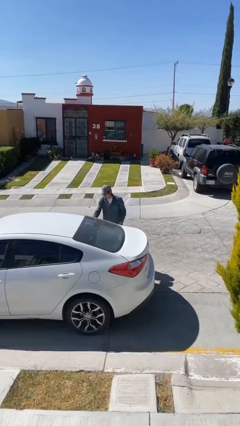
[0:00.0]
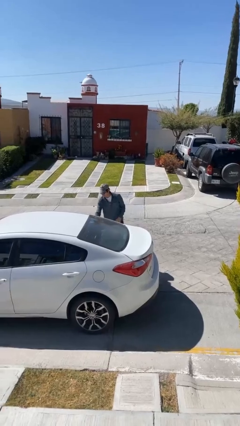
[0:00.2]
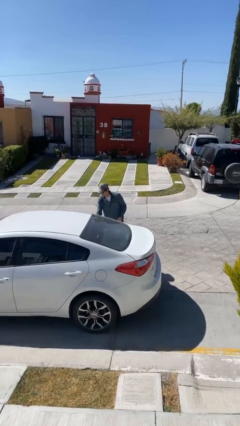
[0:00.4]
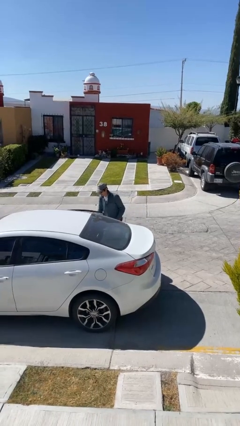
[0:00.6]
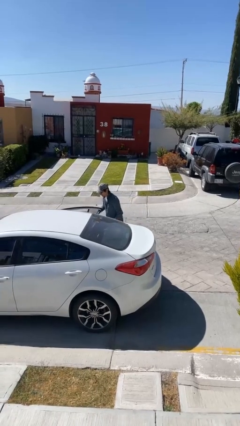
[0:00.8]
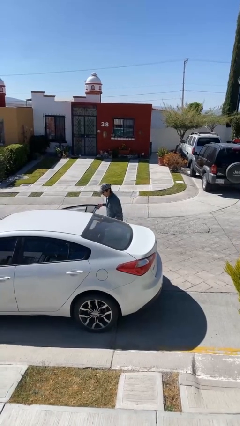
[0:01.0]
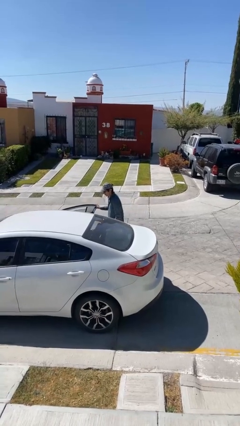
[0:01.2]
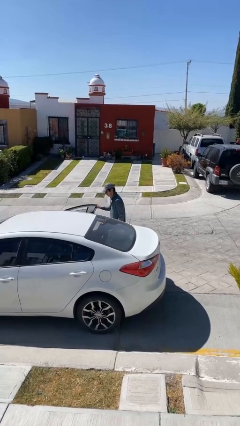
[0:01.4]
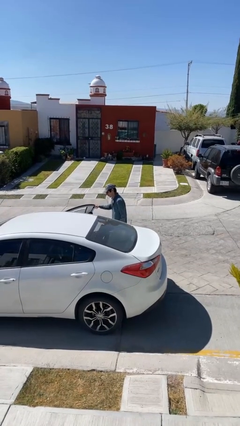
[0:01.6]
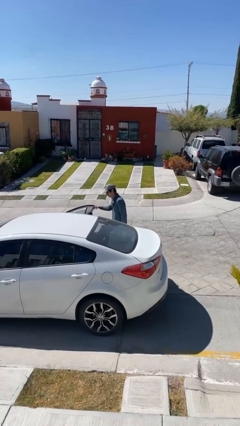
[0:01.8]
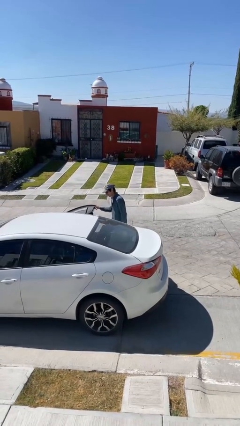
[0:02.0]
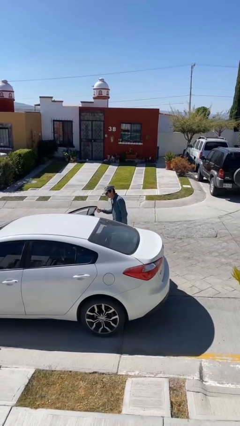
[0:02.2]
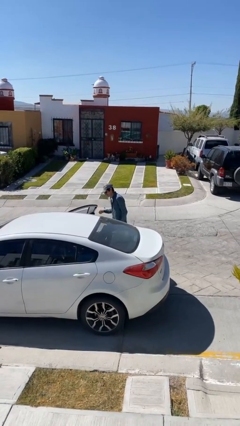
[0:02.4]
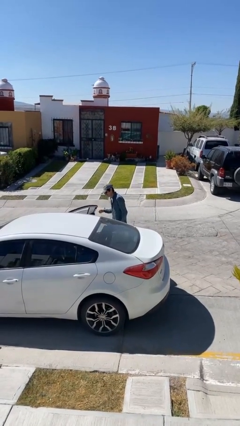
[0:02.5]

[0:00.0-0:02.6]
person opens car door

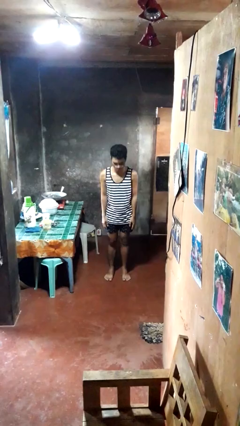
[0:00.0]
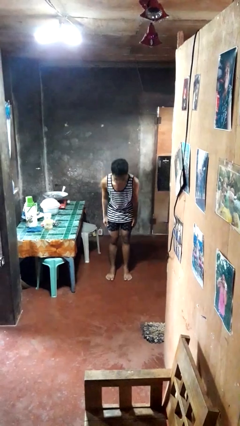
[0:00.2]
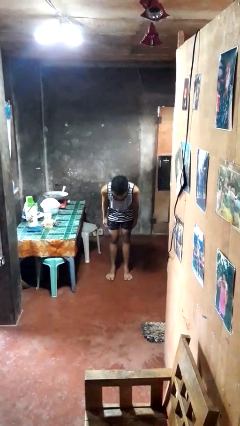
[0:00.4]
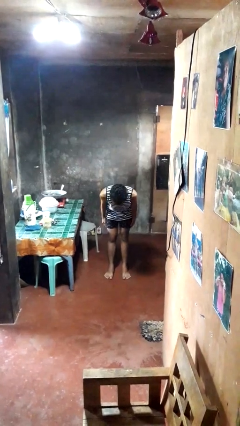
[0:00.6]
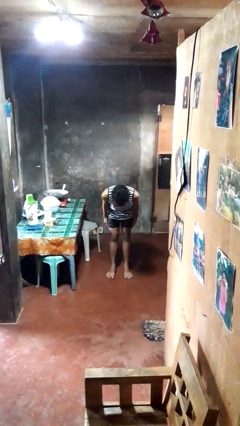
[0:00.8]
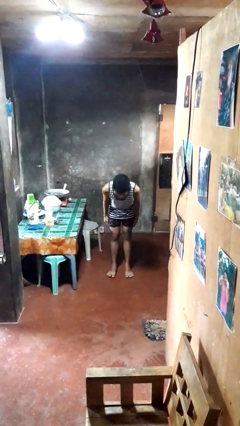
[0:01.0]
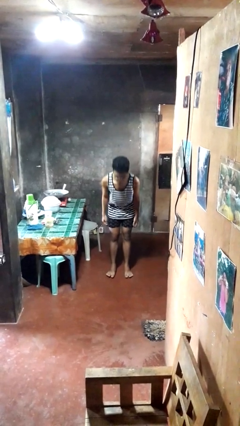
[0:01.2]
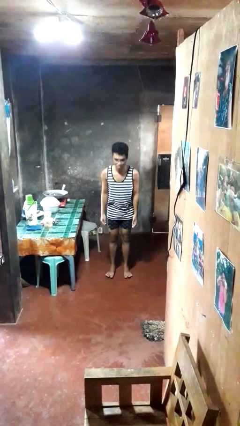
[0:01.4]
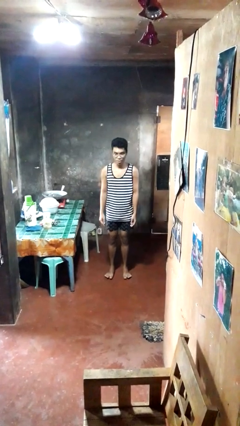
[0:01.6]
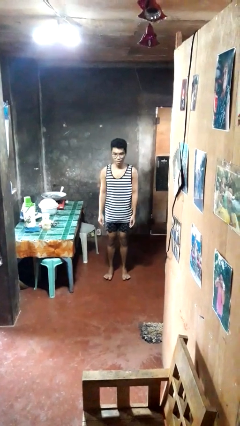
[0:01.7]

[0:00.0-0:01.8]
person bows

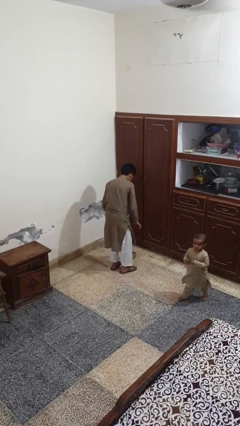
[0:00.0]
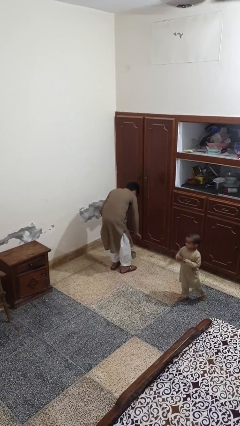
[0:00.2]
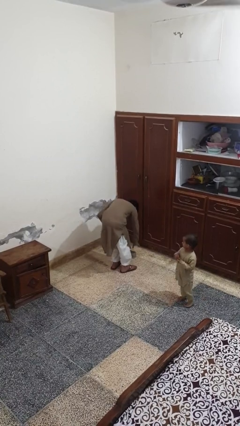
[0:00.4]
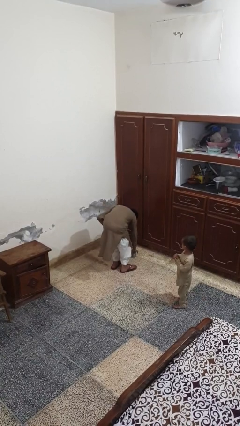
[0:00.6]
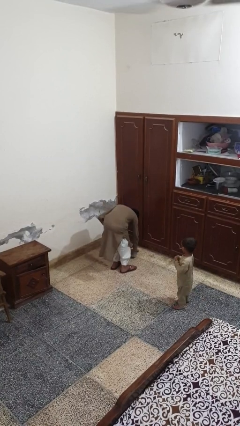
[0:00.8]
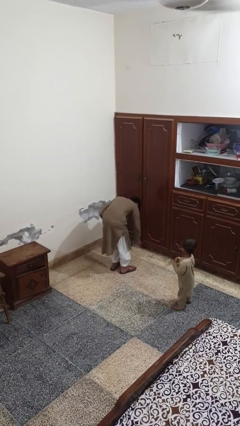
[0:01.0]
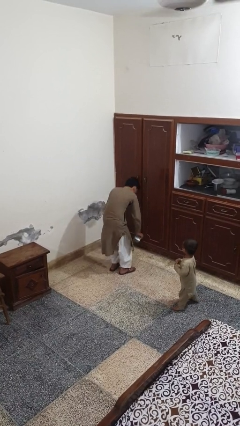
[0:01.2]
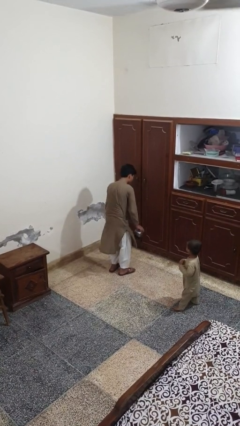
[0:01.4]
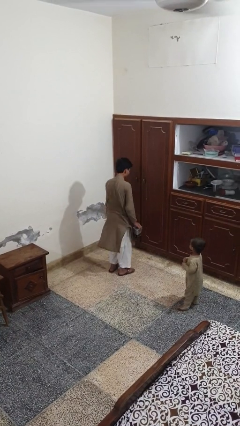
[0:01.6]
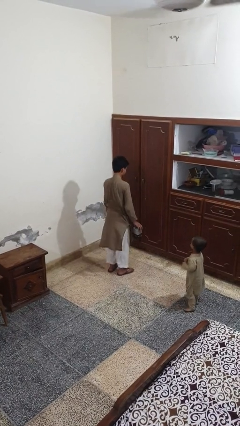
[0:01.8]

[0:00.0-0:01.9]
person picks up object from floor

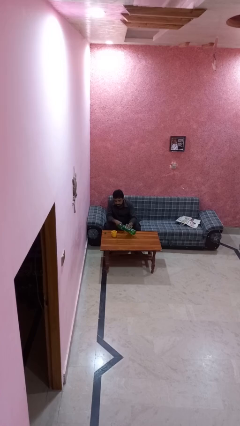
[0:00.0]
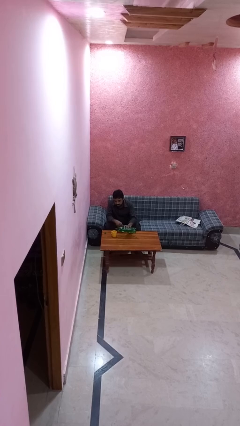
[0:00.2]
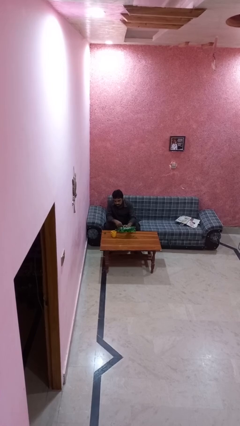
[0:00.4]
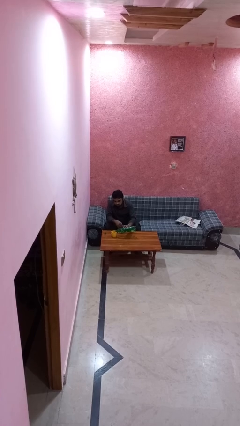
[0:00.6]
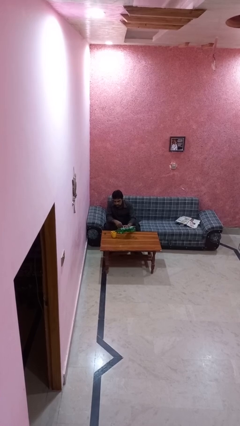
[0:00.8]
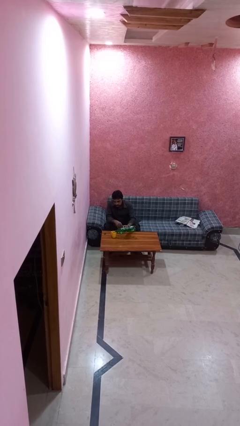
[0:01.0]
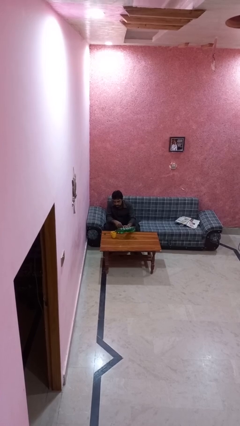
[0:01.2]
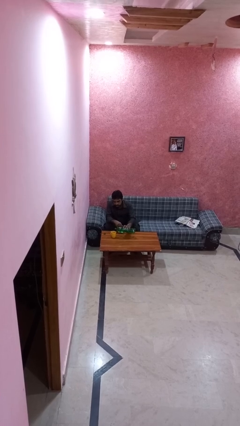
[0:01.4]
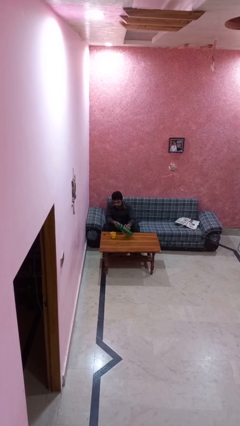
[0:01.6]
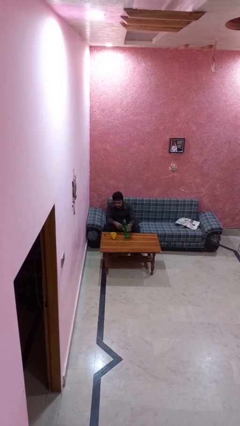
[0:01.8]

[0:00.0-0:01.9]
person pours liquid into cup

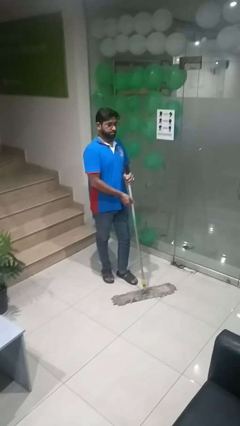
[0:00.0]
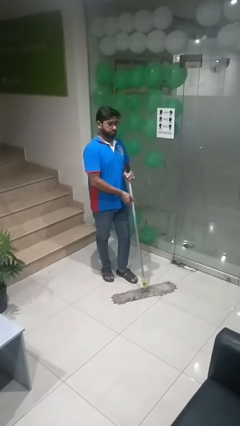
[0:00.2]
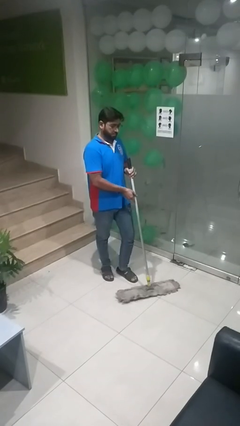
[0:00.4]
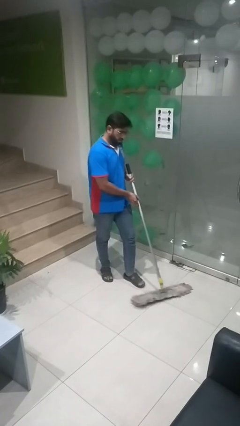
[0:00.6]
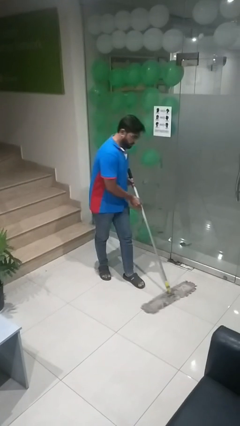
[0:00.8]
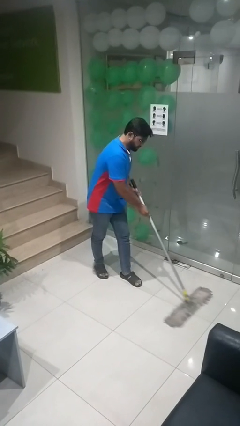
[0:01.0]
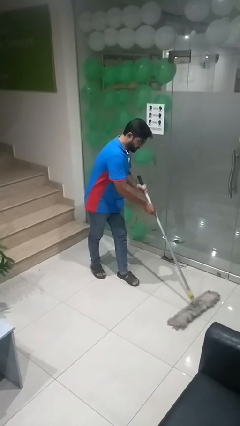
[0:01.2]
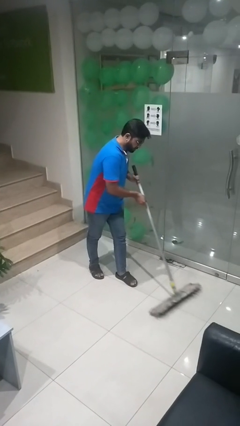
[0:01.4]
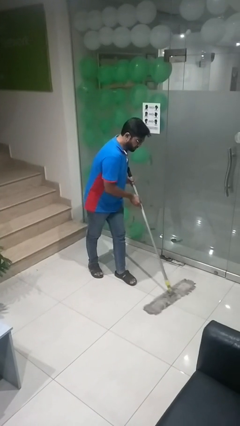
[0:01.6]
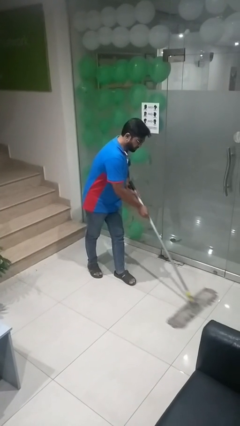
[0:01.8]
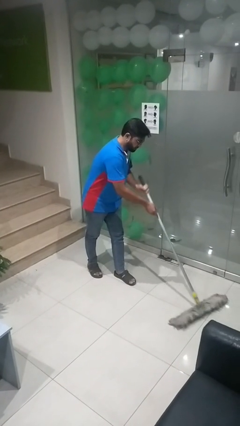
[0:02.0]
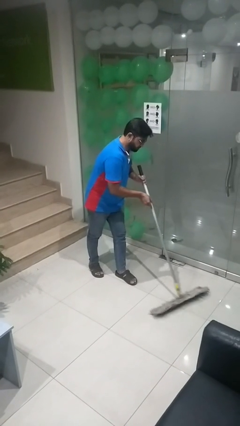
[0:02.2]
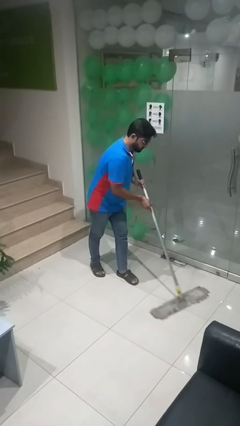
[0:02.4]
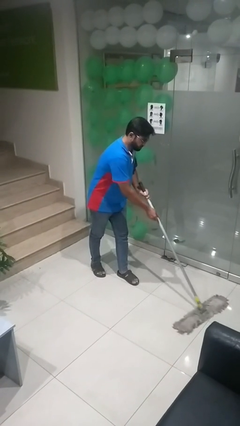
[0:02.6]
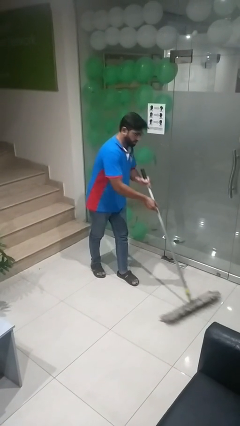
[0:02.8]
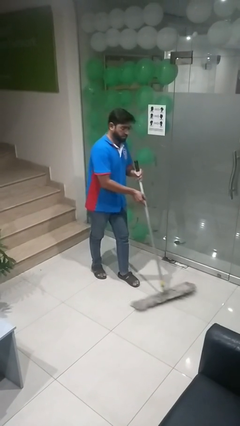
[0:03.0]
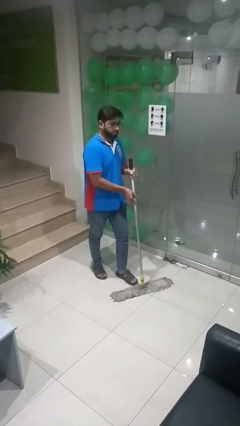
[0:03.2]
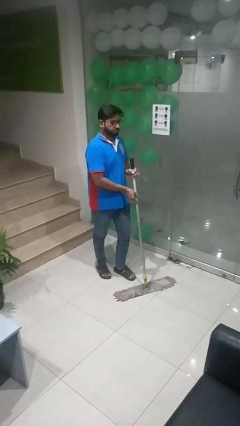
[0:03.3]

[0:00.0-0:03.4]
person mops

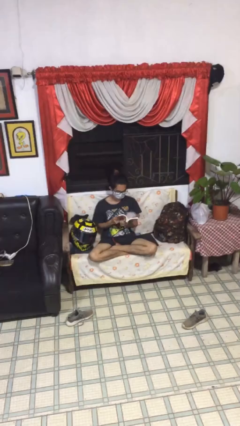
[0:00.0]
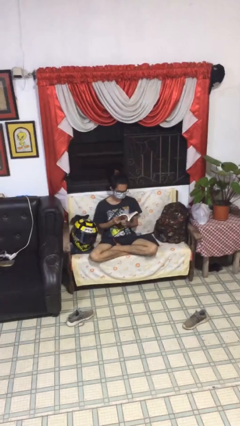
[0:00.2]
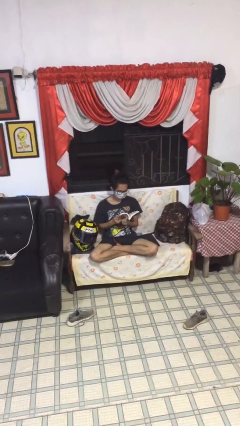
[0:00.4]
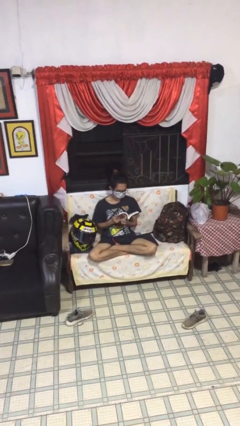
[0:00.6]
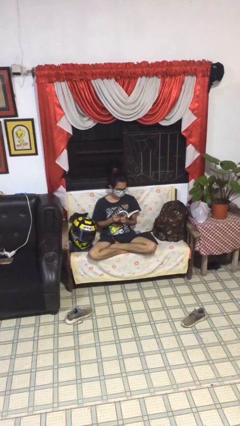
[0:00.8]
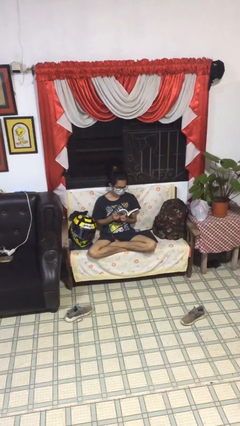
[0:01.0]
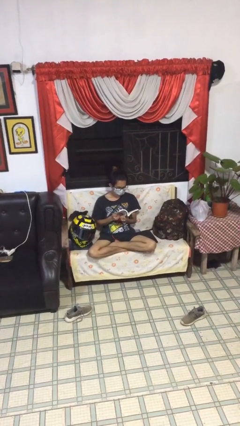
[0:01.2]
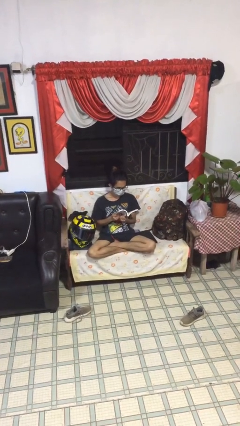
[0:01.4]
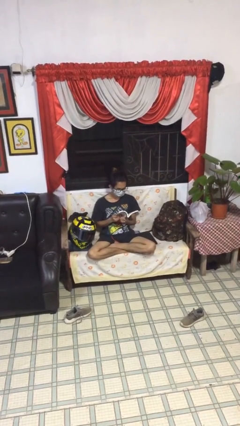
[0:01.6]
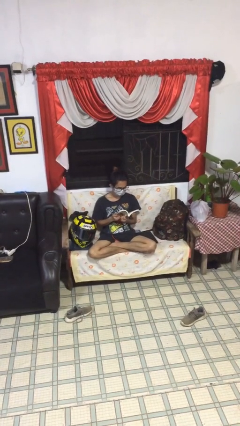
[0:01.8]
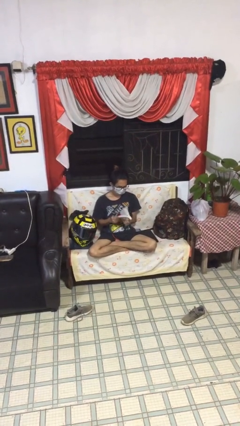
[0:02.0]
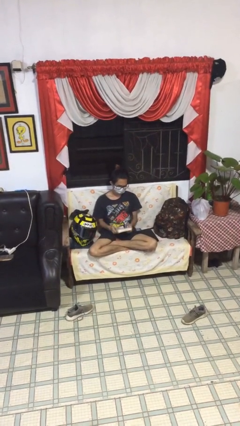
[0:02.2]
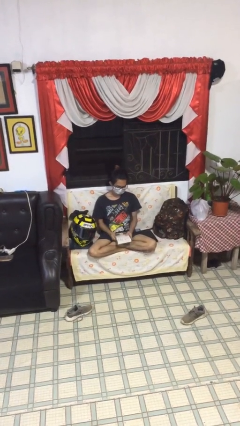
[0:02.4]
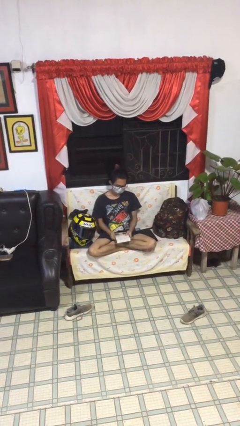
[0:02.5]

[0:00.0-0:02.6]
person reads document

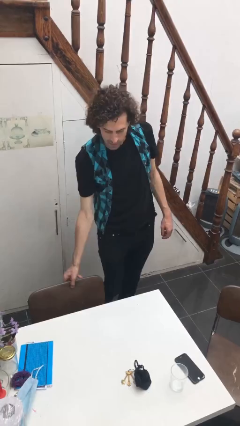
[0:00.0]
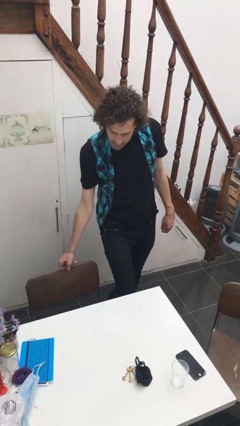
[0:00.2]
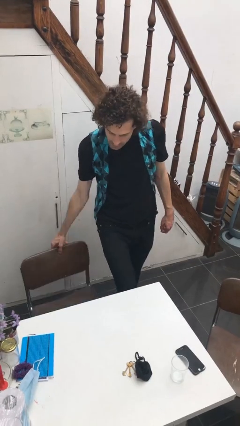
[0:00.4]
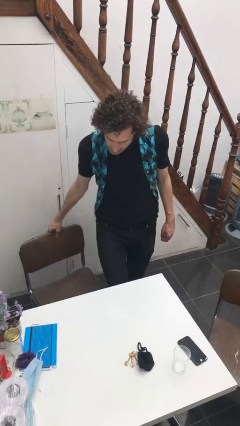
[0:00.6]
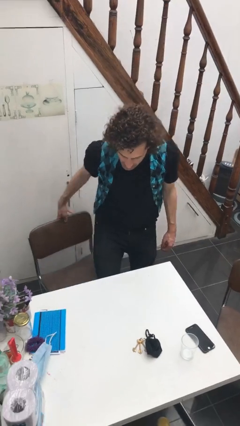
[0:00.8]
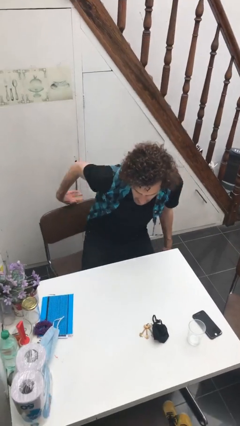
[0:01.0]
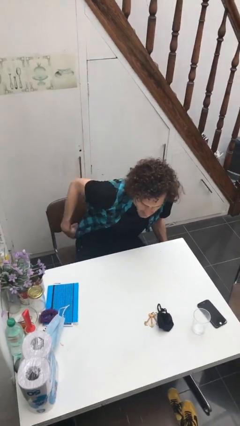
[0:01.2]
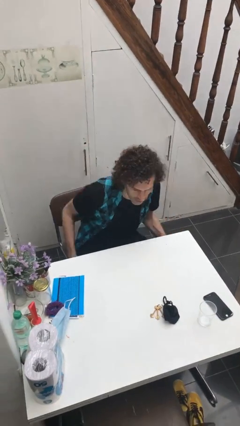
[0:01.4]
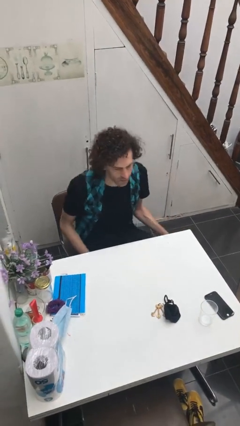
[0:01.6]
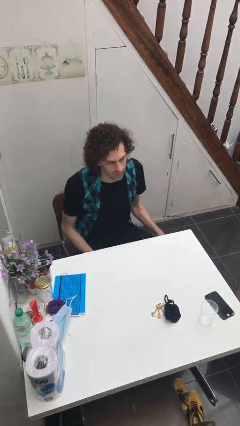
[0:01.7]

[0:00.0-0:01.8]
person sits down

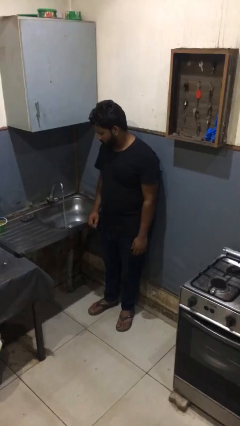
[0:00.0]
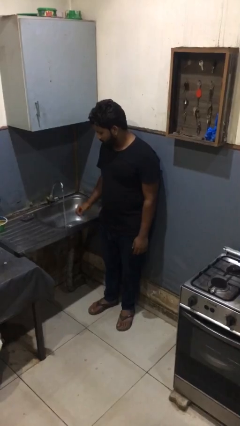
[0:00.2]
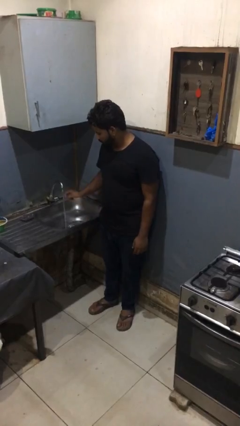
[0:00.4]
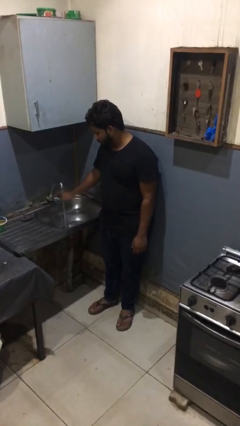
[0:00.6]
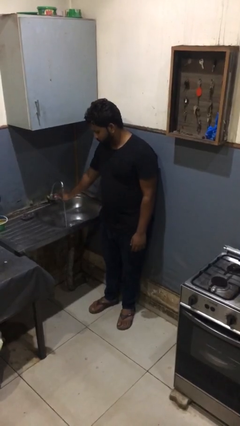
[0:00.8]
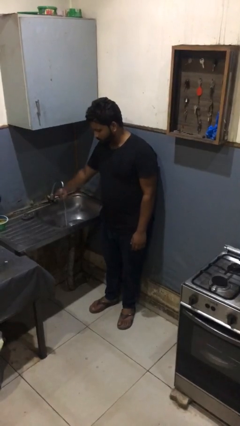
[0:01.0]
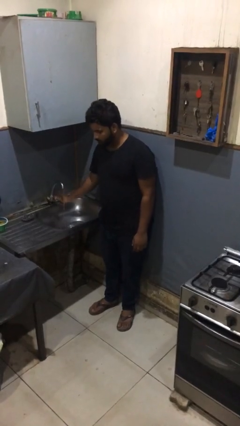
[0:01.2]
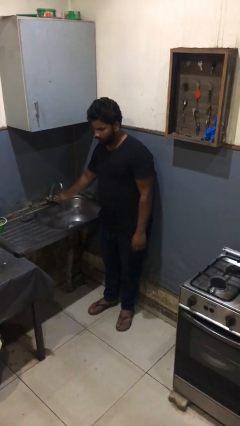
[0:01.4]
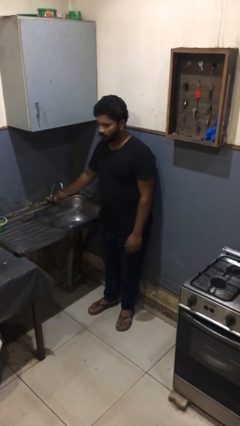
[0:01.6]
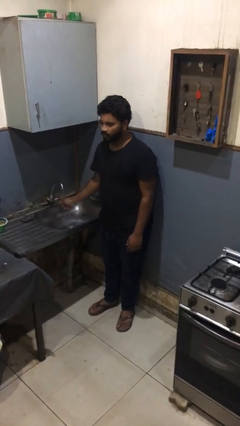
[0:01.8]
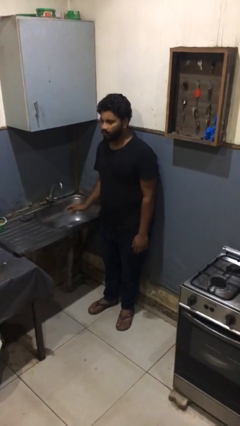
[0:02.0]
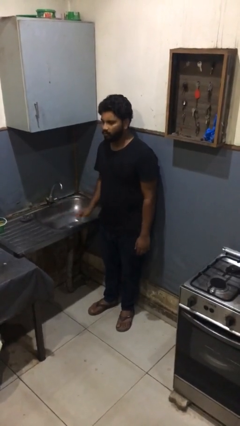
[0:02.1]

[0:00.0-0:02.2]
person turns off faucet
